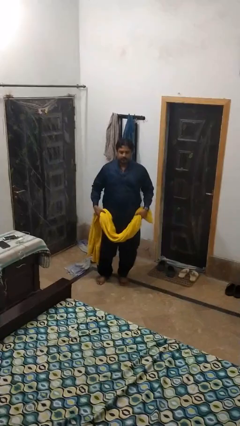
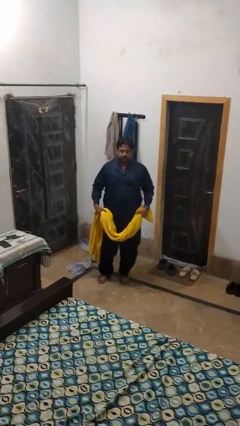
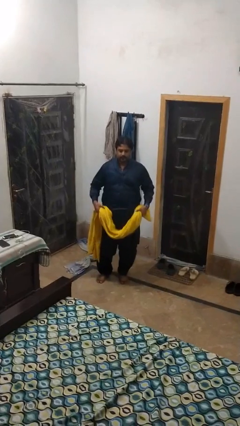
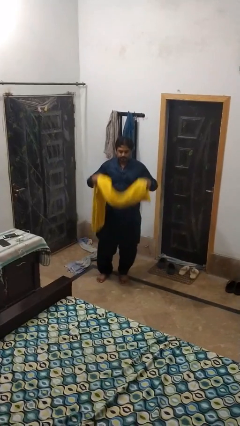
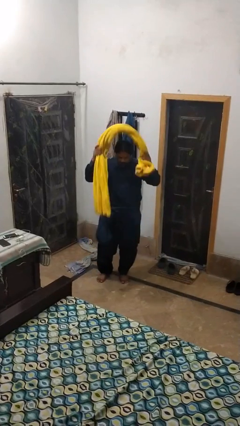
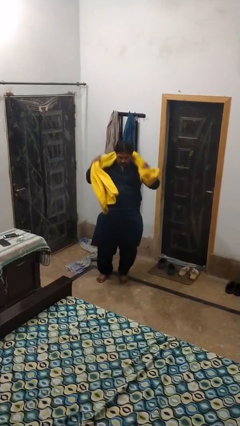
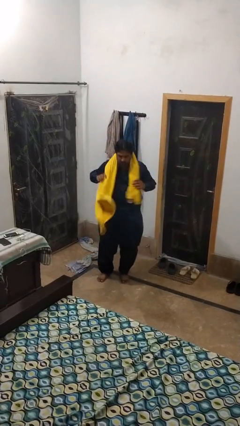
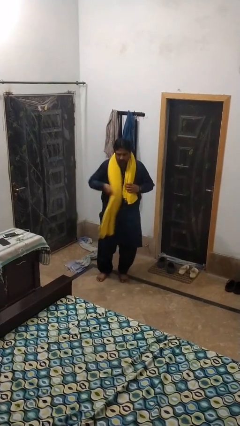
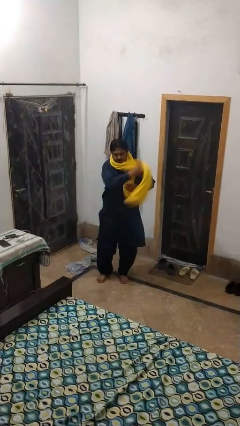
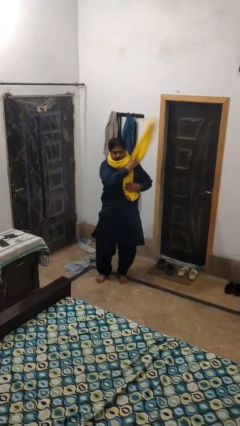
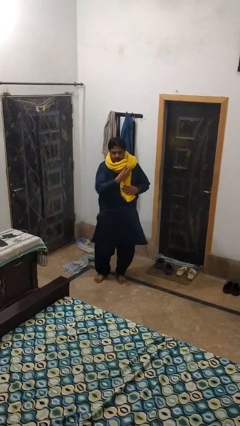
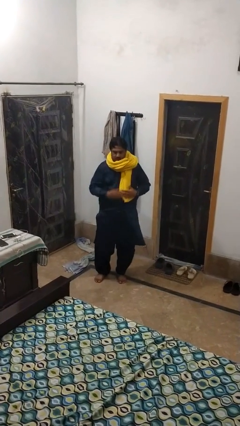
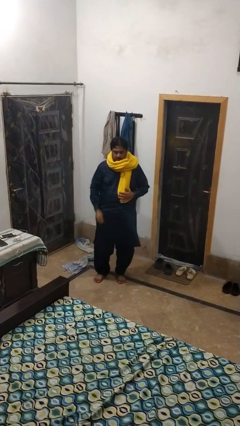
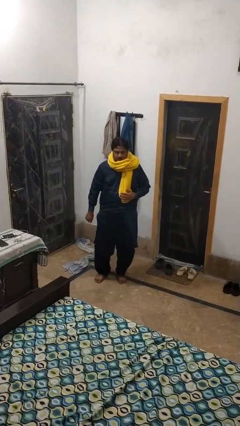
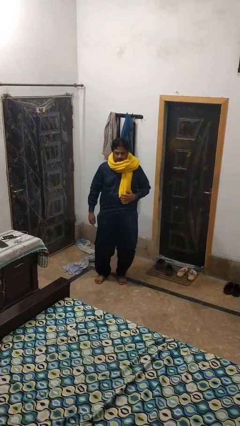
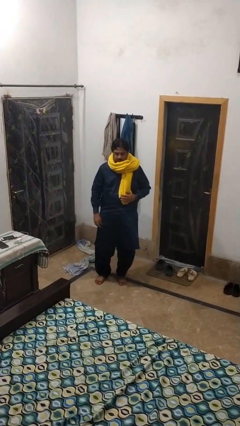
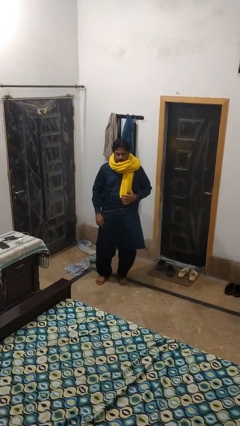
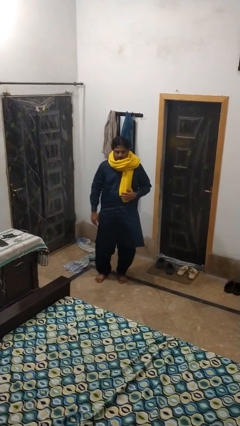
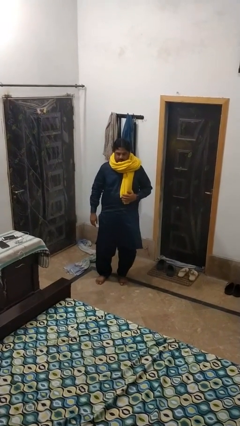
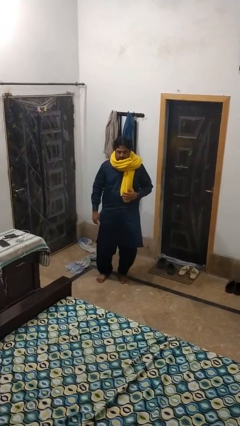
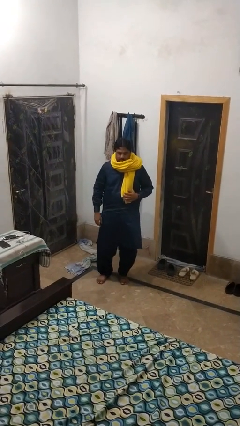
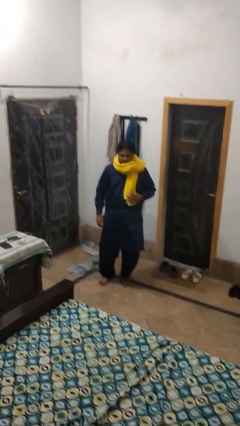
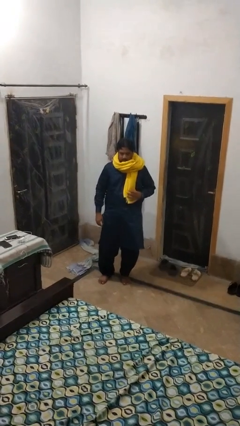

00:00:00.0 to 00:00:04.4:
person puts on scarf

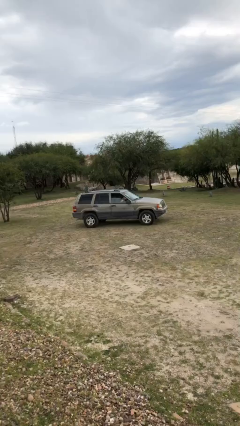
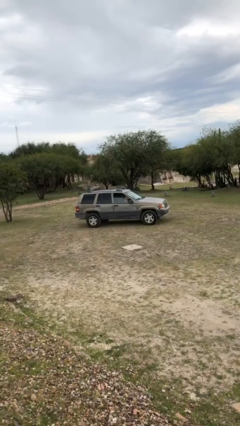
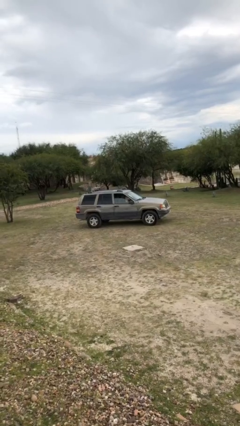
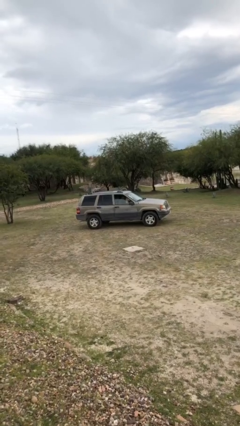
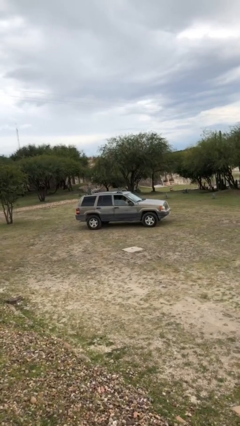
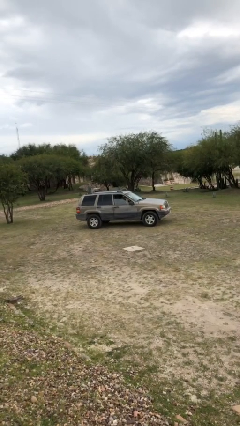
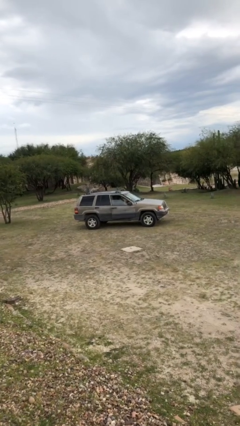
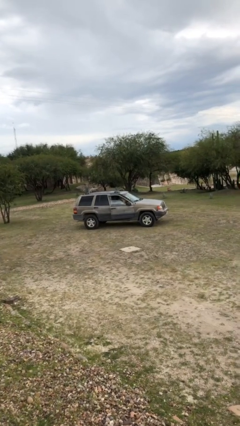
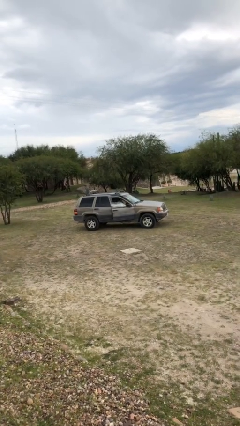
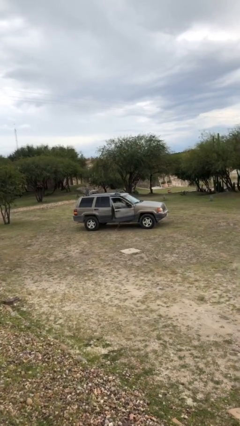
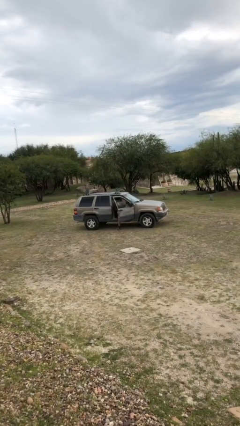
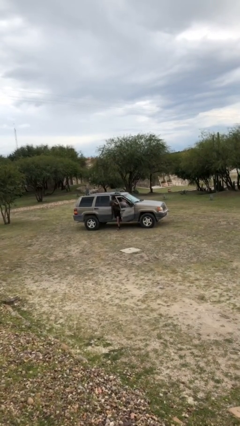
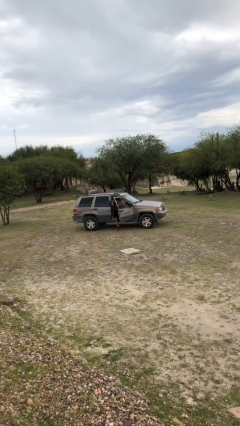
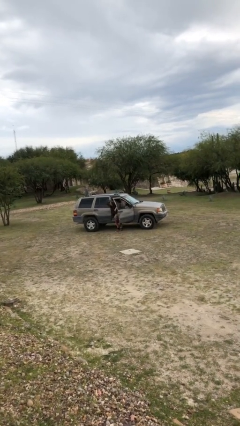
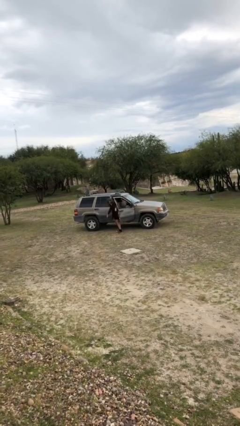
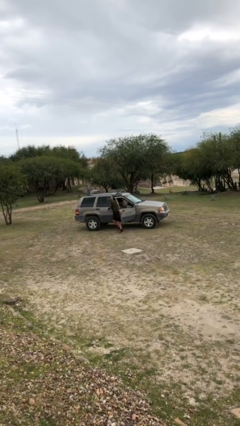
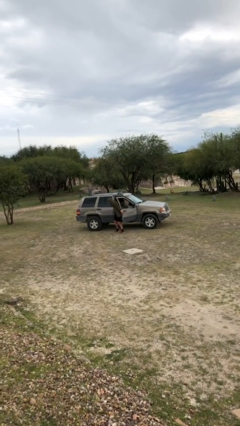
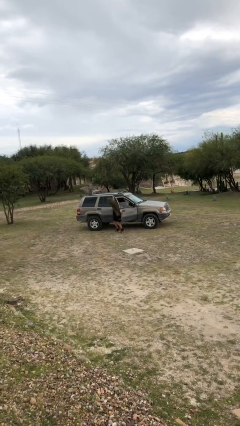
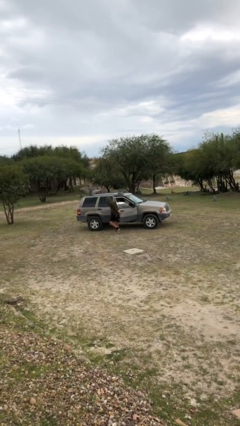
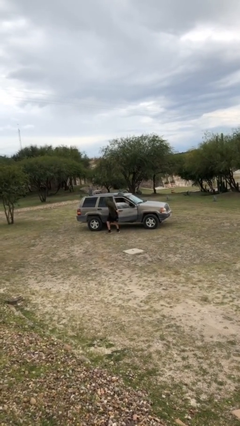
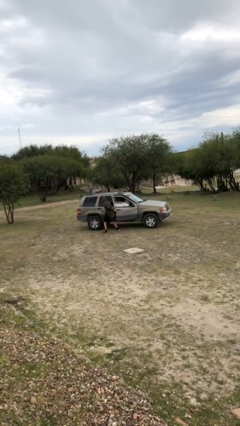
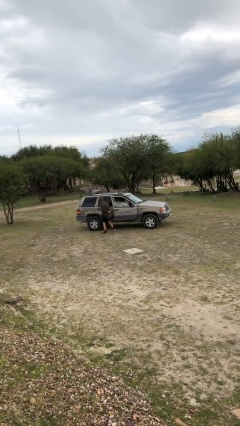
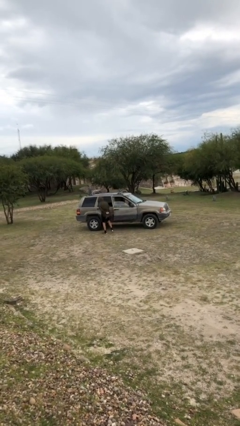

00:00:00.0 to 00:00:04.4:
car drops off person

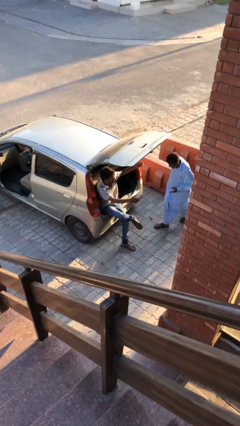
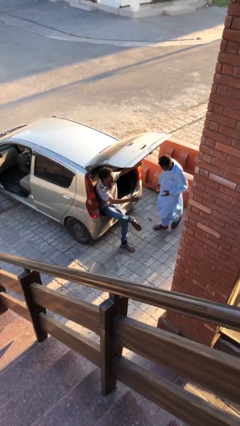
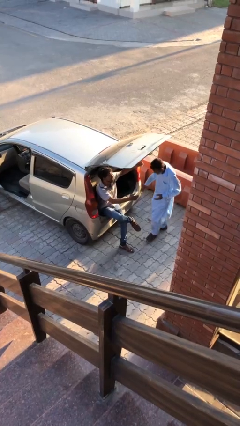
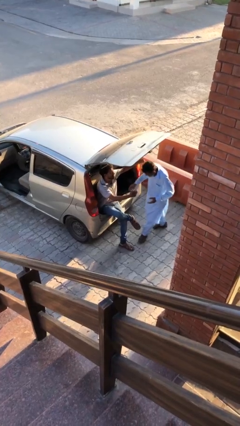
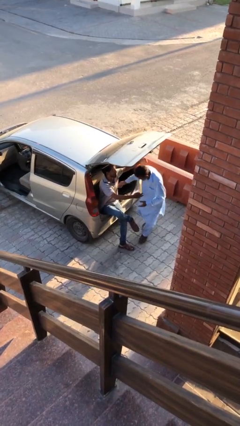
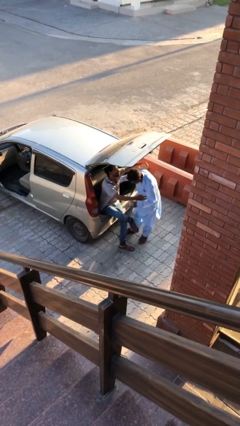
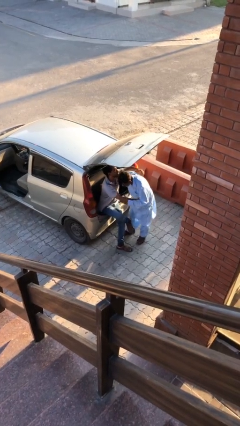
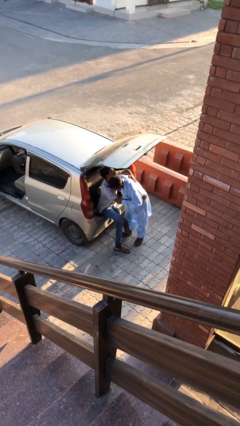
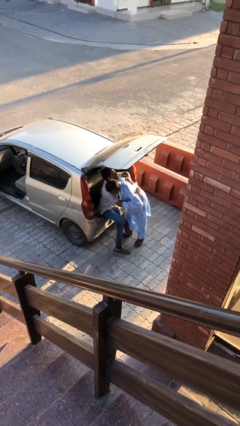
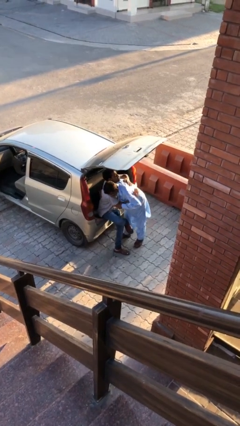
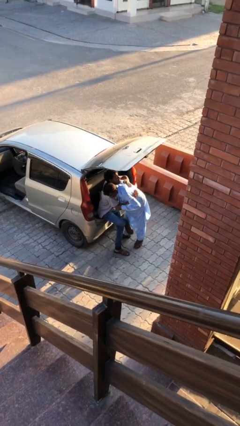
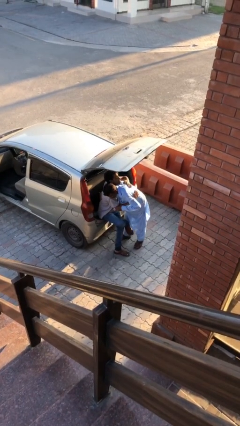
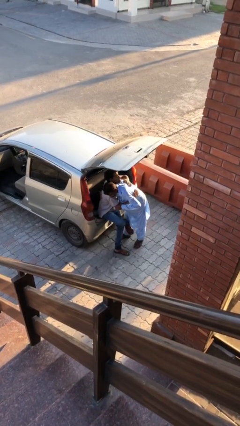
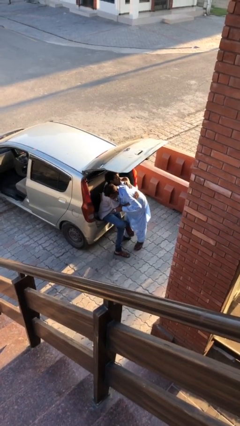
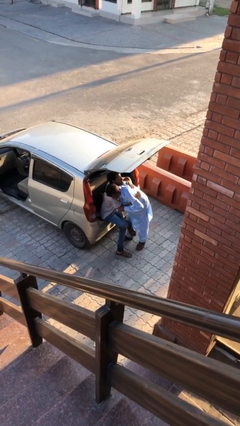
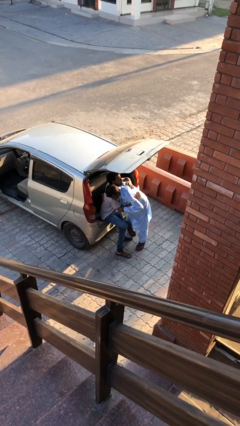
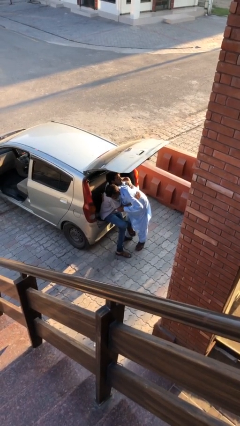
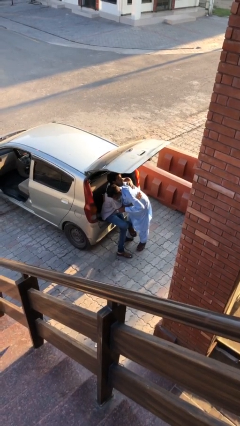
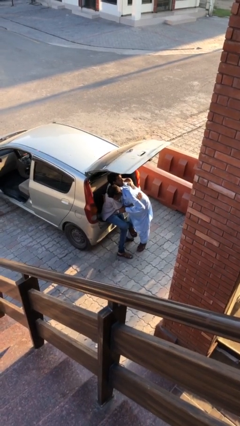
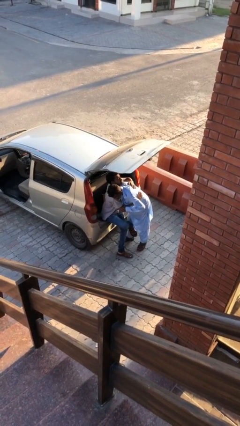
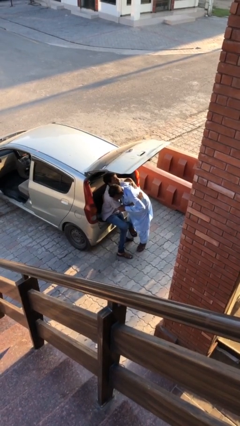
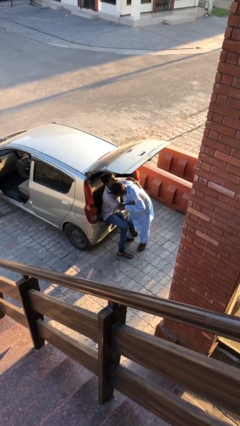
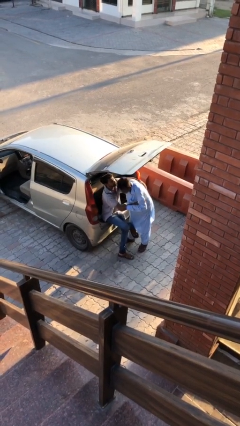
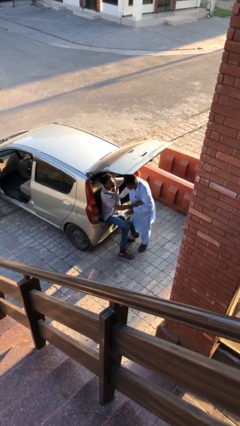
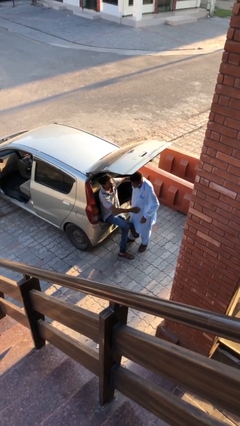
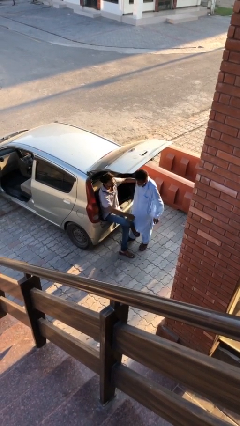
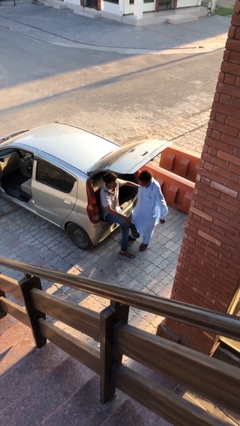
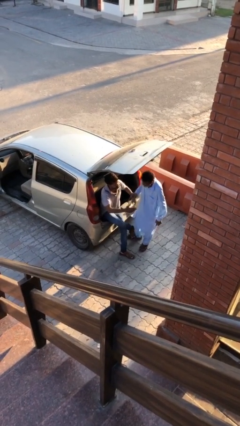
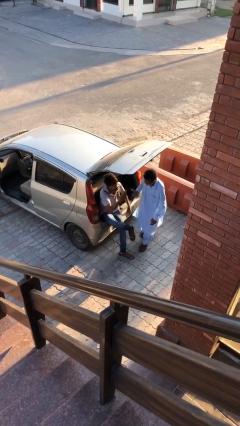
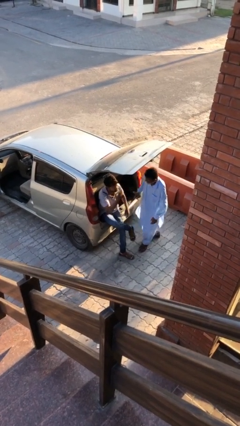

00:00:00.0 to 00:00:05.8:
person embraces person

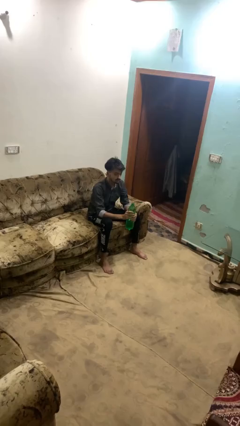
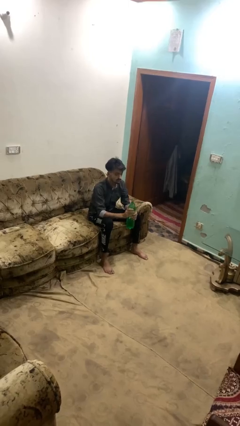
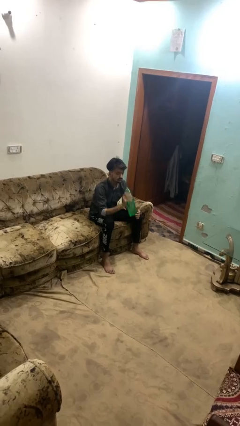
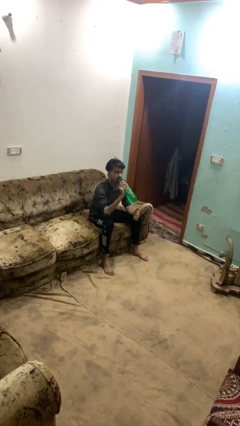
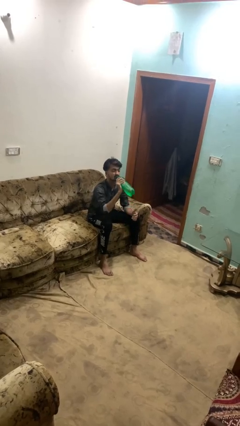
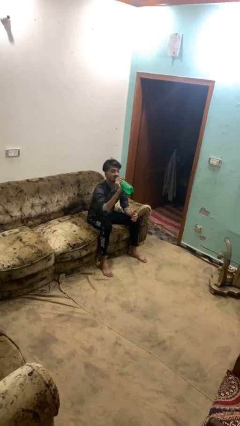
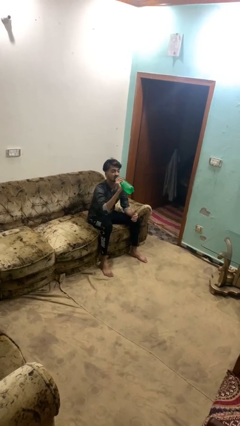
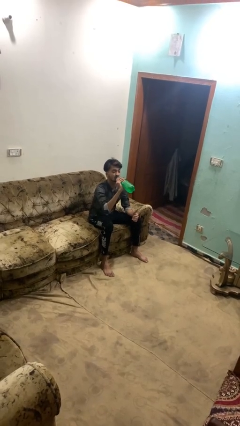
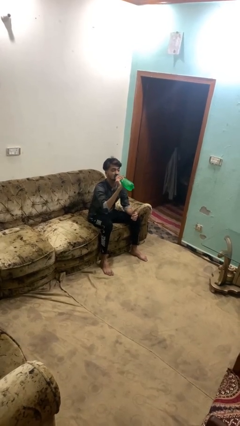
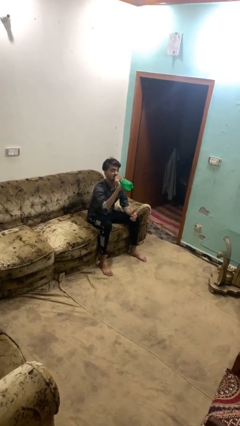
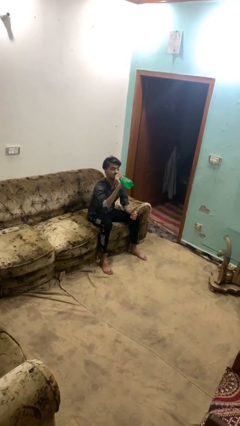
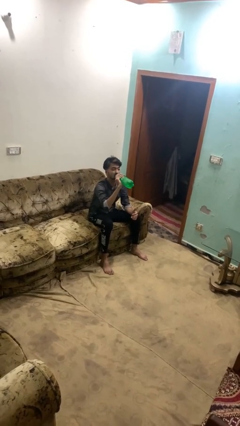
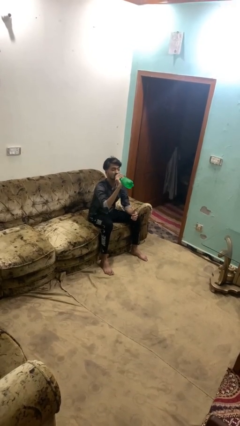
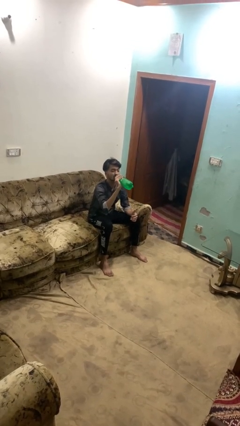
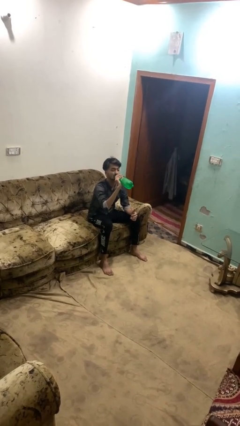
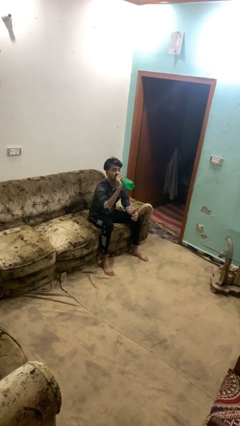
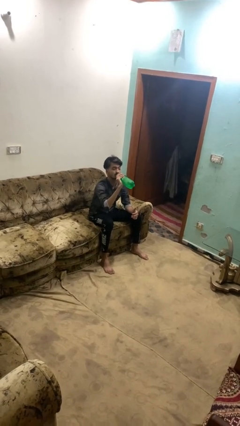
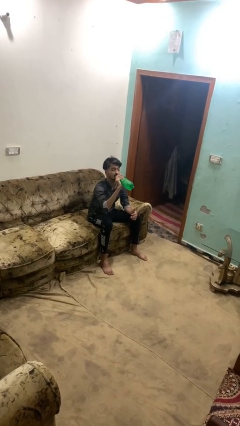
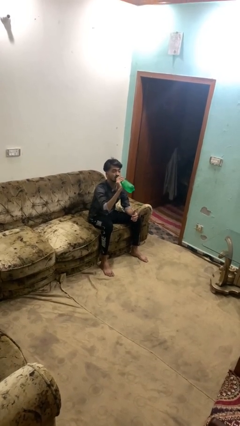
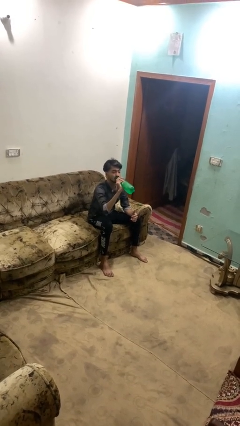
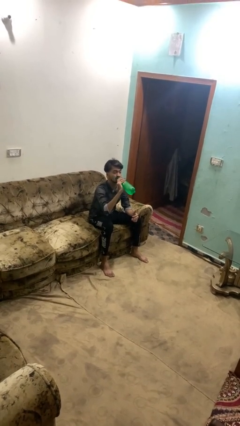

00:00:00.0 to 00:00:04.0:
person drinks from bottle
